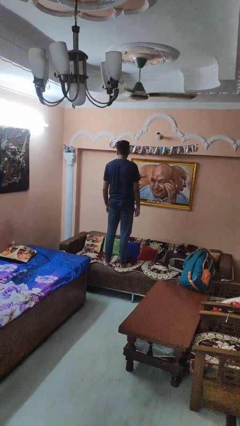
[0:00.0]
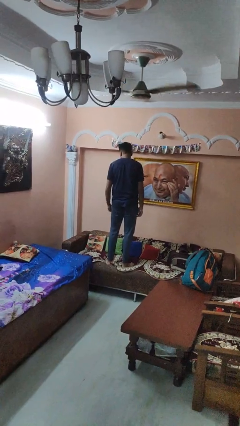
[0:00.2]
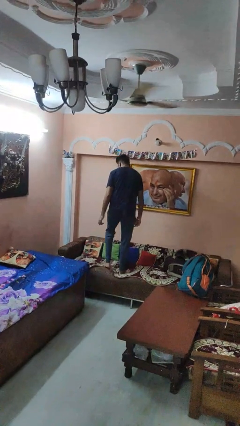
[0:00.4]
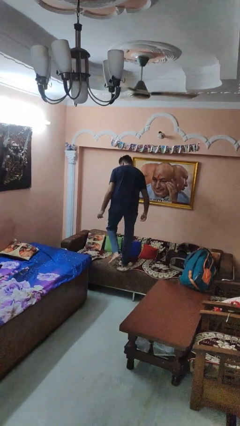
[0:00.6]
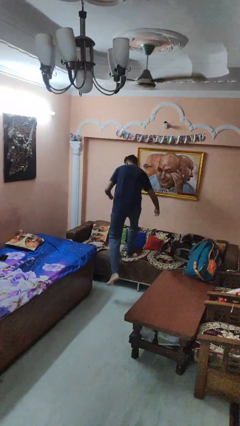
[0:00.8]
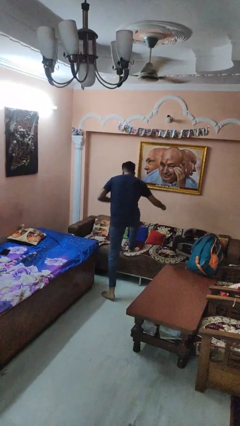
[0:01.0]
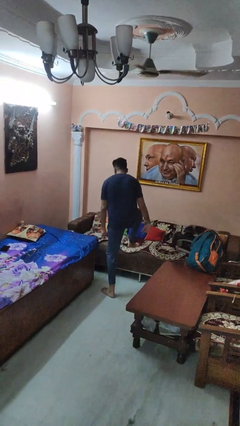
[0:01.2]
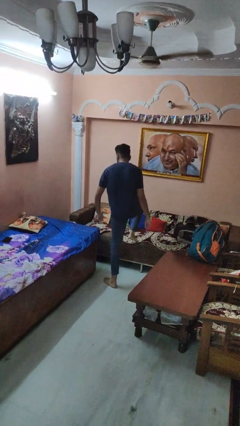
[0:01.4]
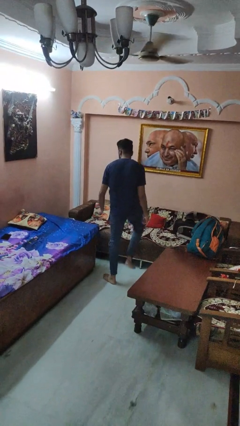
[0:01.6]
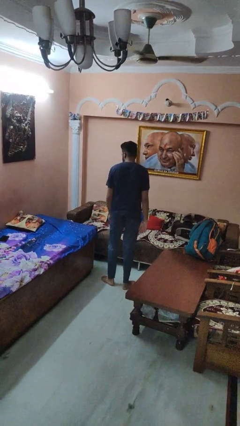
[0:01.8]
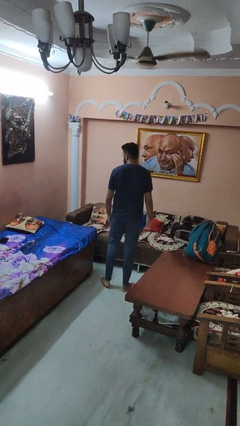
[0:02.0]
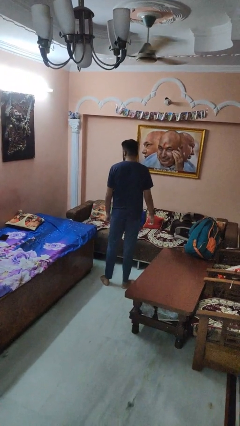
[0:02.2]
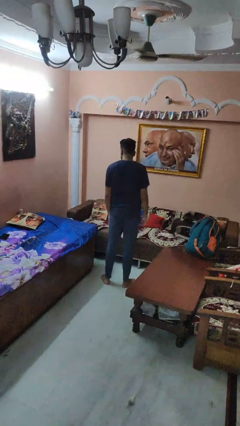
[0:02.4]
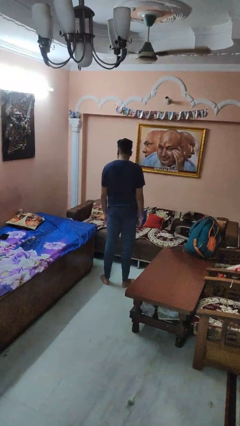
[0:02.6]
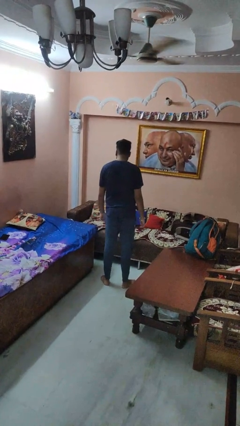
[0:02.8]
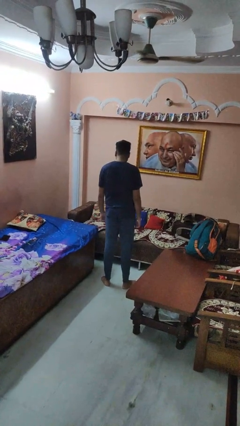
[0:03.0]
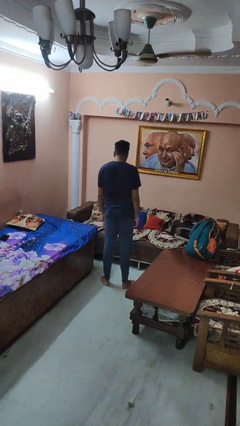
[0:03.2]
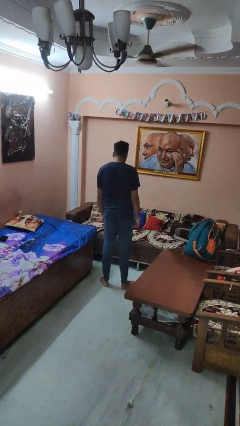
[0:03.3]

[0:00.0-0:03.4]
person climbs off couch

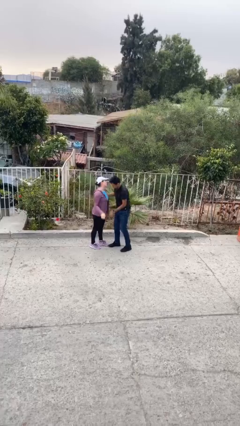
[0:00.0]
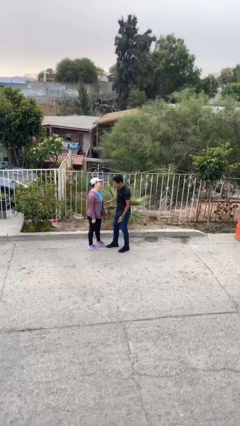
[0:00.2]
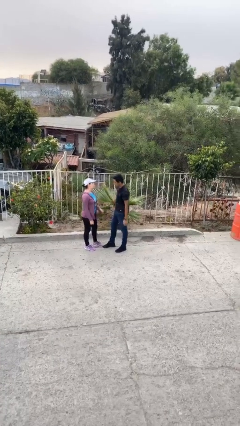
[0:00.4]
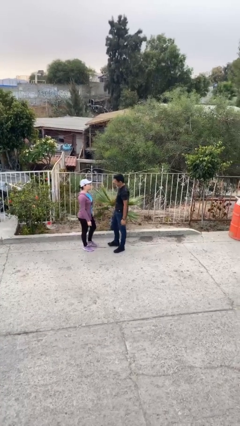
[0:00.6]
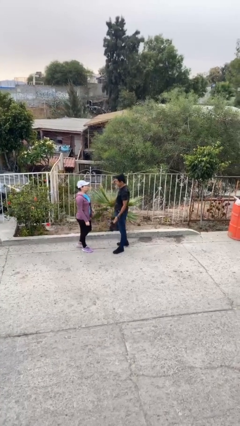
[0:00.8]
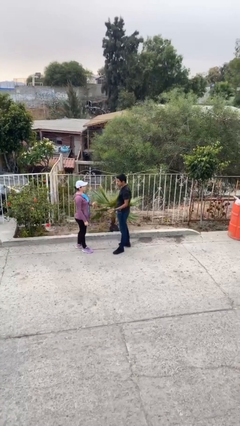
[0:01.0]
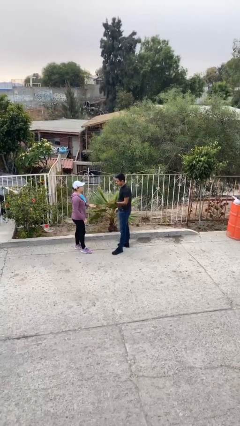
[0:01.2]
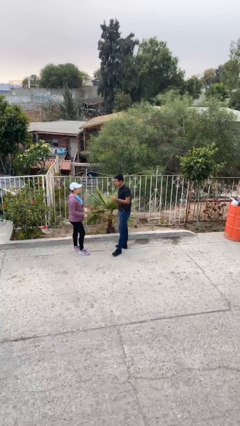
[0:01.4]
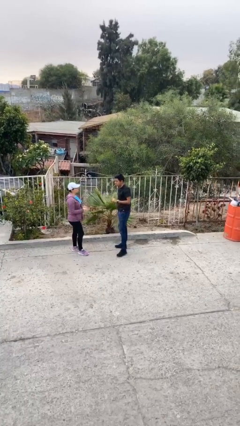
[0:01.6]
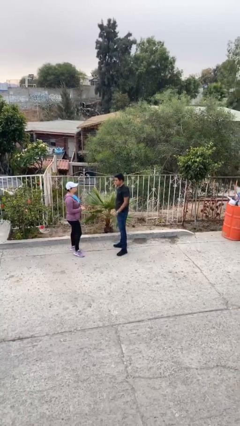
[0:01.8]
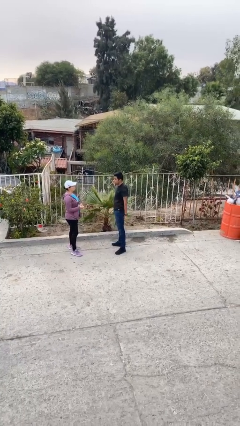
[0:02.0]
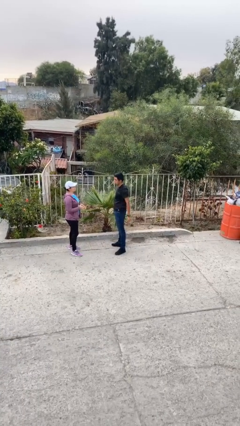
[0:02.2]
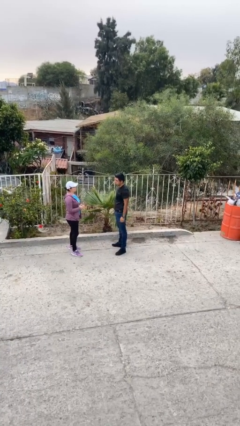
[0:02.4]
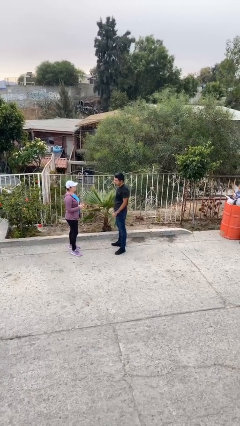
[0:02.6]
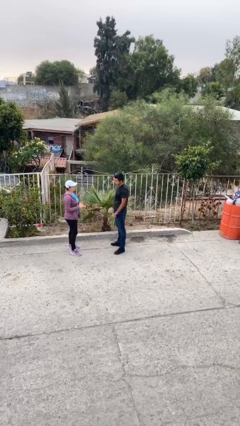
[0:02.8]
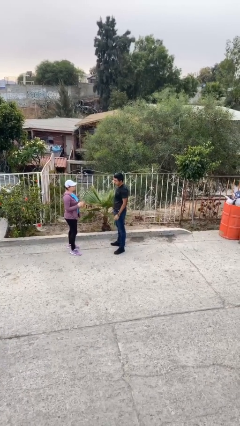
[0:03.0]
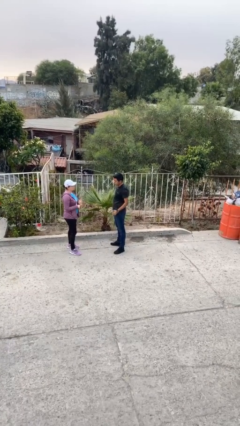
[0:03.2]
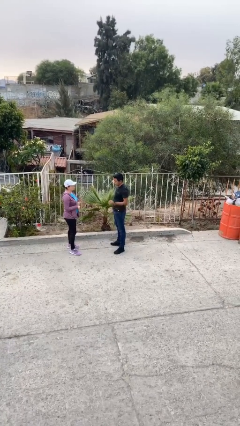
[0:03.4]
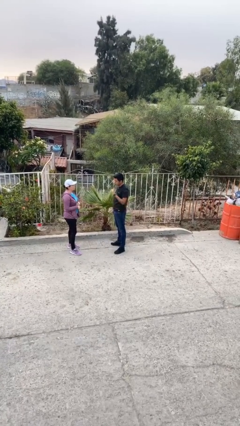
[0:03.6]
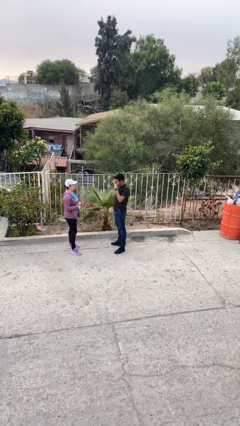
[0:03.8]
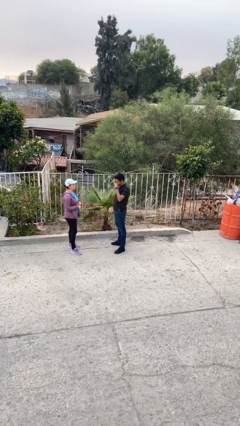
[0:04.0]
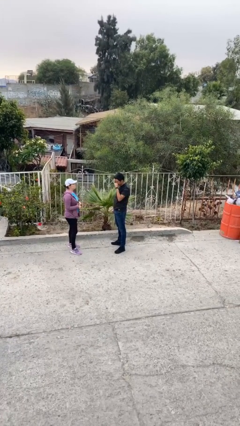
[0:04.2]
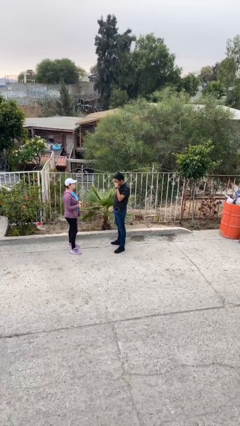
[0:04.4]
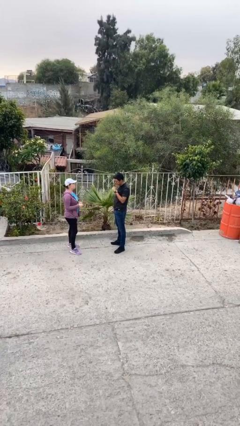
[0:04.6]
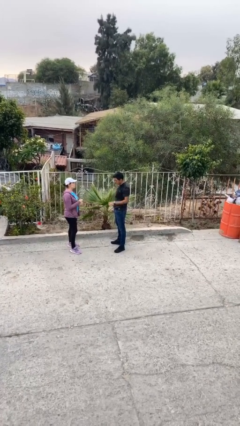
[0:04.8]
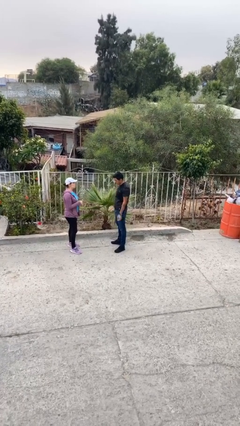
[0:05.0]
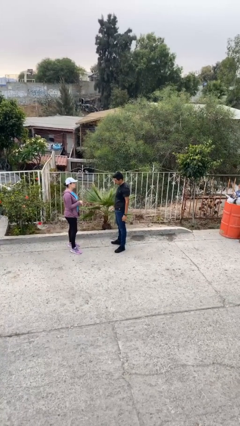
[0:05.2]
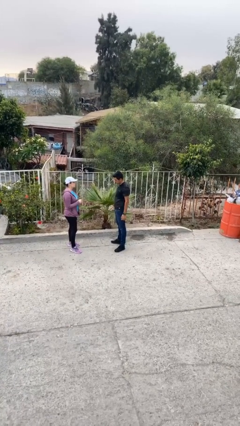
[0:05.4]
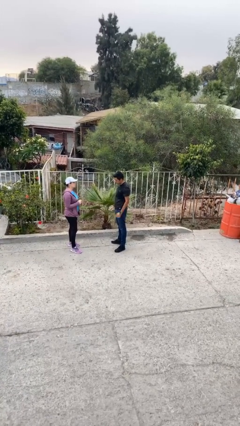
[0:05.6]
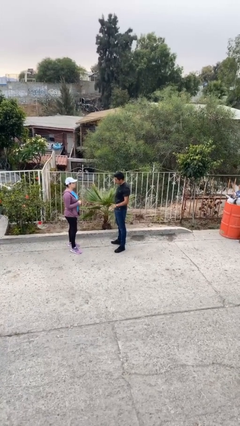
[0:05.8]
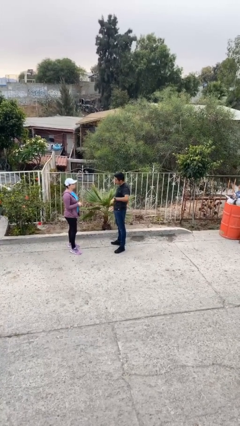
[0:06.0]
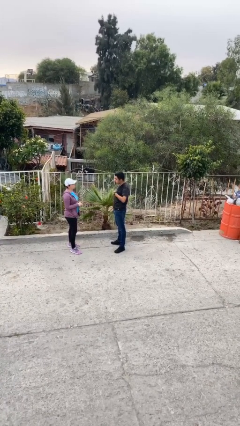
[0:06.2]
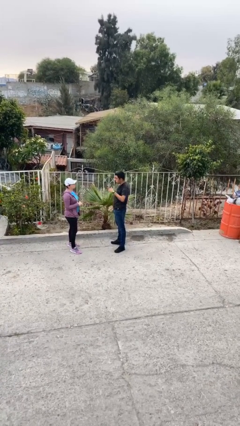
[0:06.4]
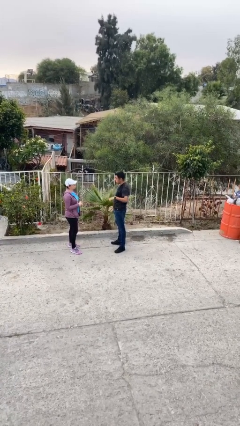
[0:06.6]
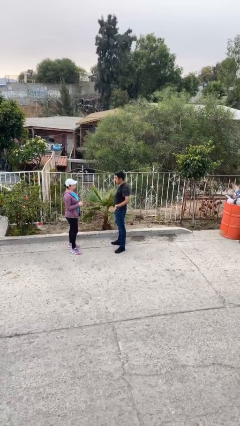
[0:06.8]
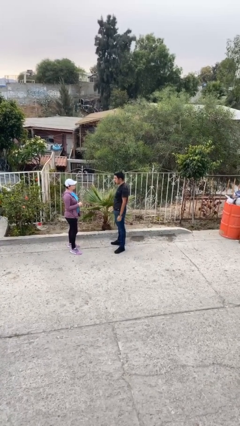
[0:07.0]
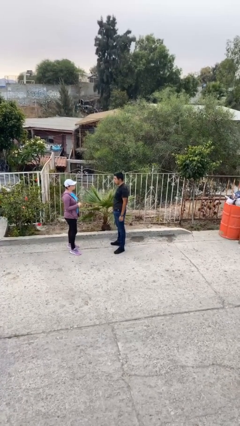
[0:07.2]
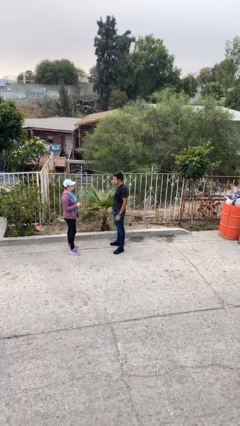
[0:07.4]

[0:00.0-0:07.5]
person talks to person

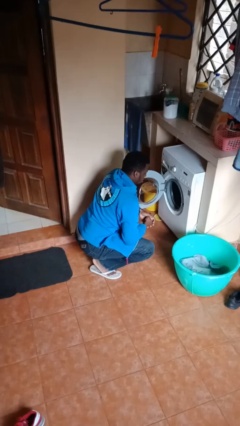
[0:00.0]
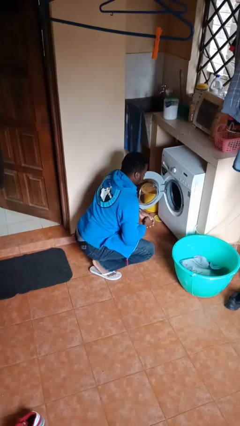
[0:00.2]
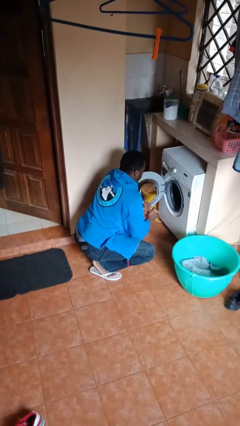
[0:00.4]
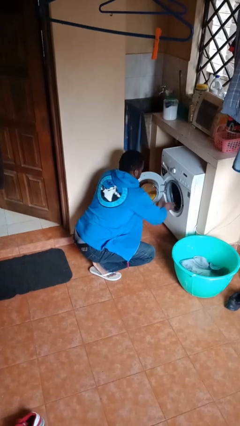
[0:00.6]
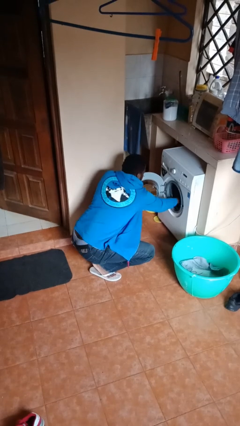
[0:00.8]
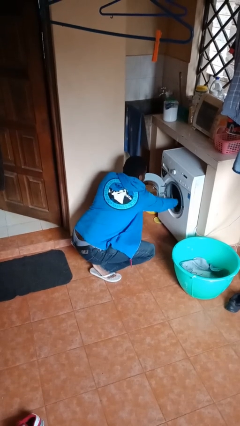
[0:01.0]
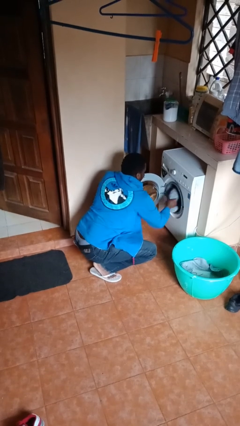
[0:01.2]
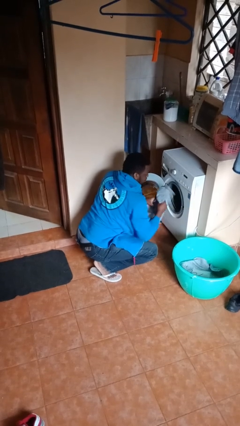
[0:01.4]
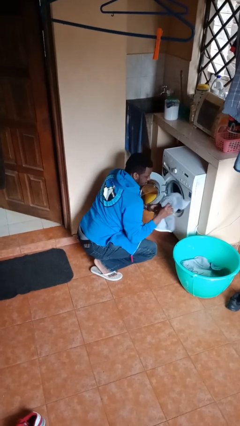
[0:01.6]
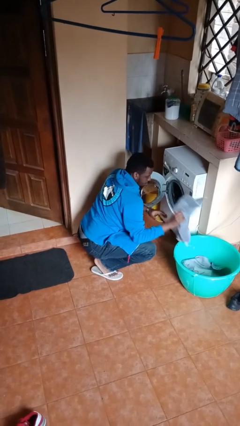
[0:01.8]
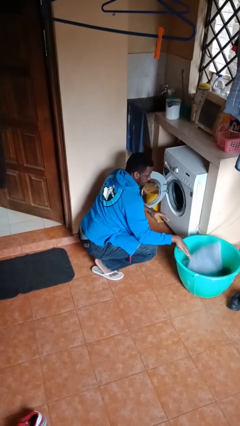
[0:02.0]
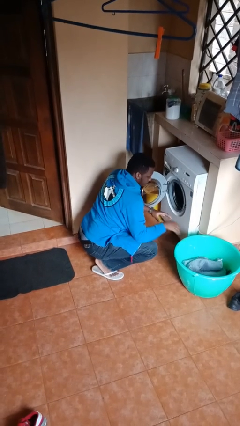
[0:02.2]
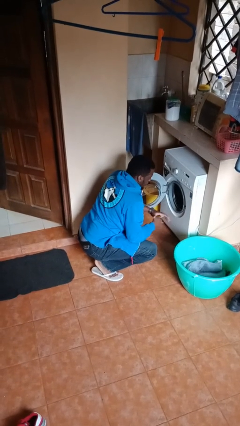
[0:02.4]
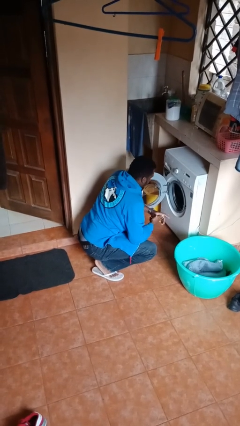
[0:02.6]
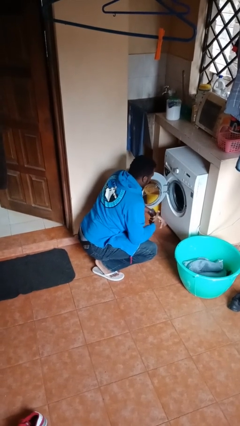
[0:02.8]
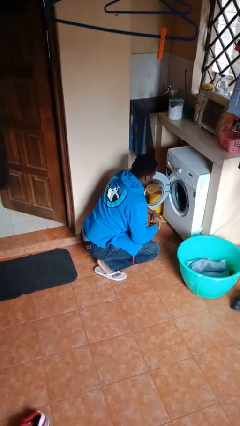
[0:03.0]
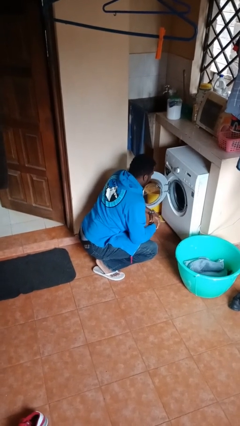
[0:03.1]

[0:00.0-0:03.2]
person loads clotheswasher

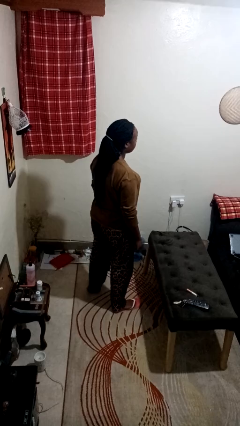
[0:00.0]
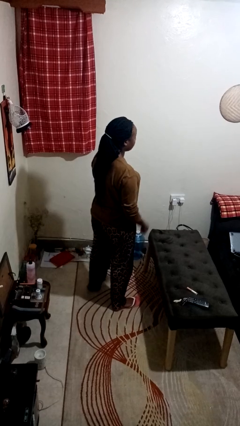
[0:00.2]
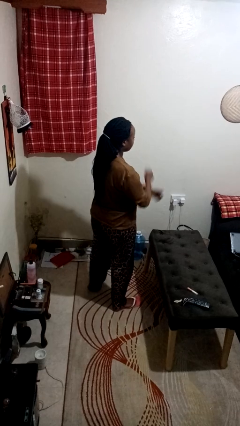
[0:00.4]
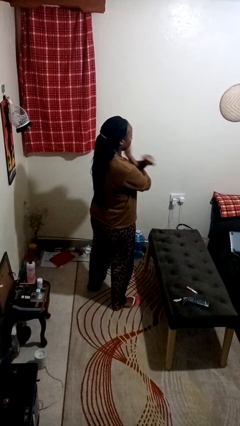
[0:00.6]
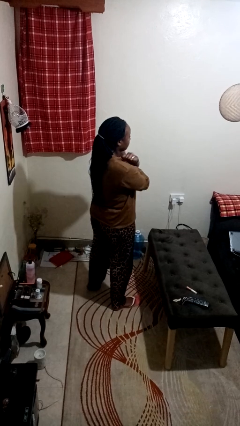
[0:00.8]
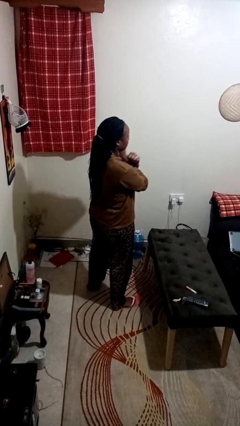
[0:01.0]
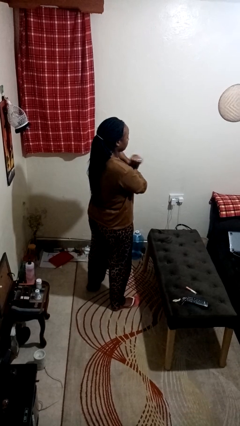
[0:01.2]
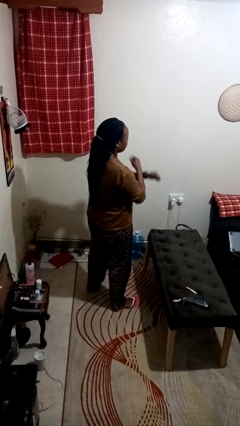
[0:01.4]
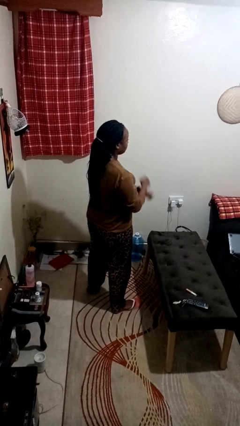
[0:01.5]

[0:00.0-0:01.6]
person gestures arms x

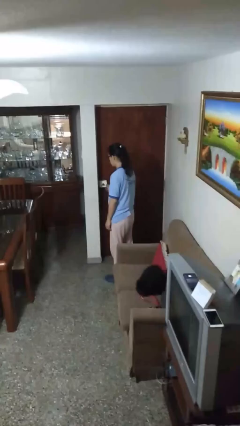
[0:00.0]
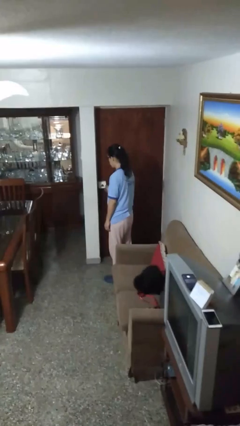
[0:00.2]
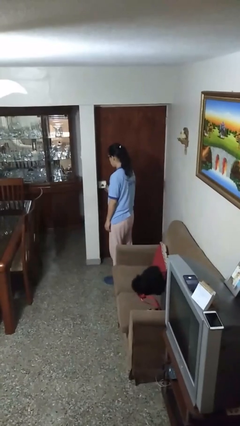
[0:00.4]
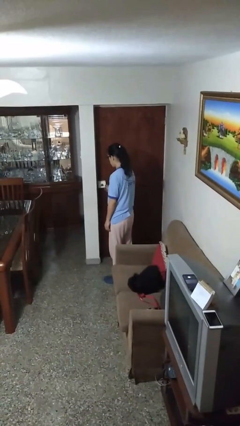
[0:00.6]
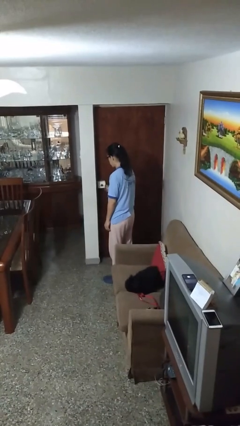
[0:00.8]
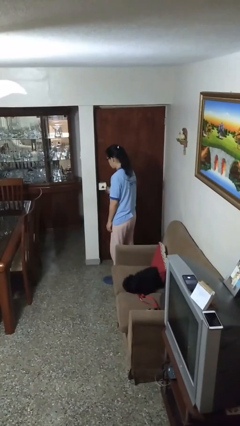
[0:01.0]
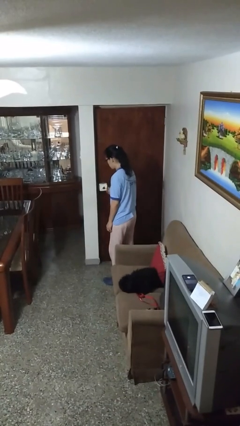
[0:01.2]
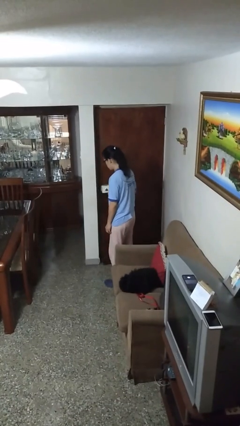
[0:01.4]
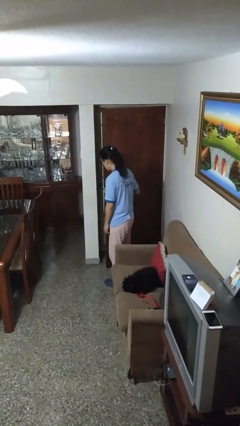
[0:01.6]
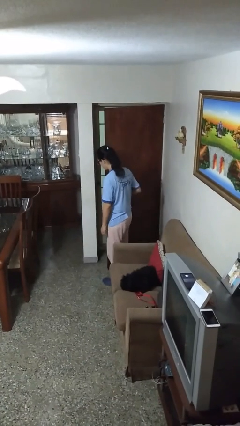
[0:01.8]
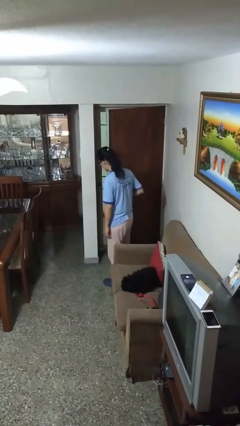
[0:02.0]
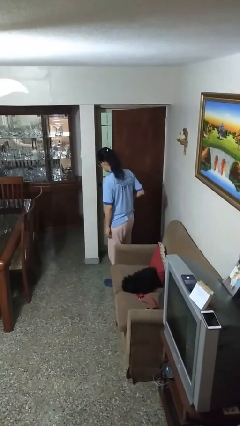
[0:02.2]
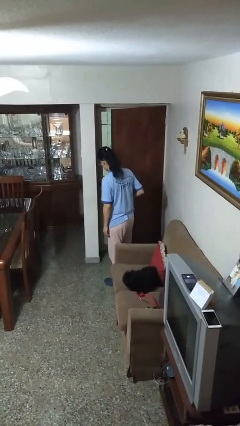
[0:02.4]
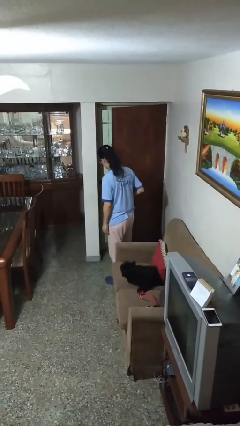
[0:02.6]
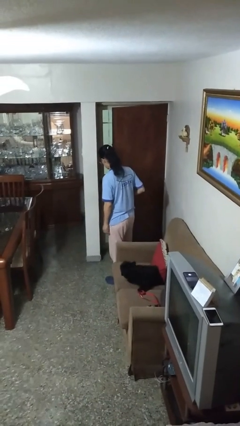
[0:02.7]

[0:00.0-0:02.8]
person opens facility door
